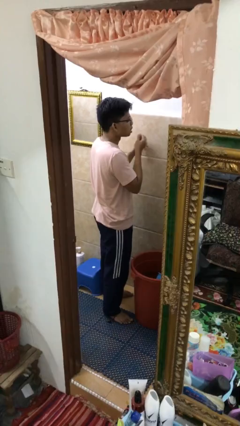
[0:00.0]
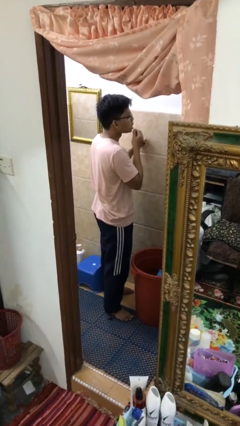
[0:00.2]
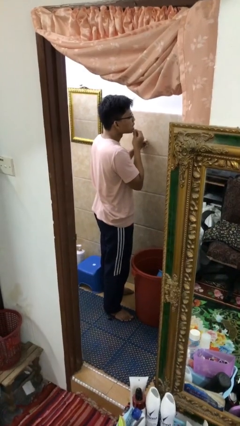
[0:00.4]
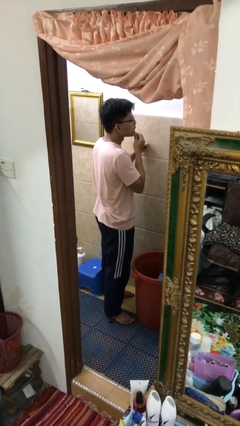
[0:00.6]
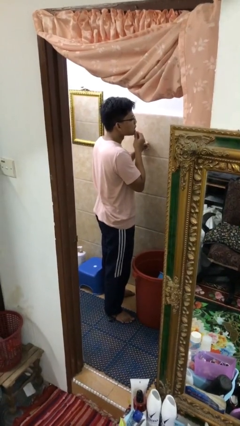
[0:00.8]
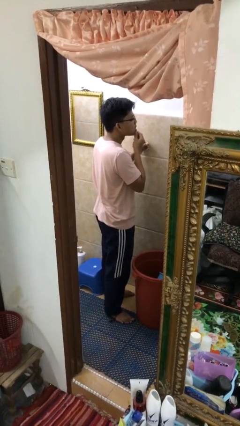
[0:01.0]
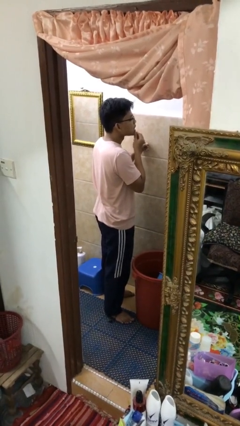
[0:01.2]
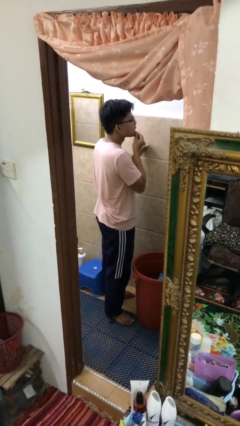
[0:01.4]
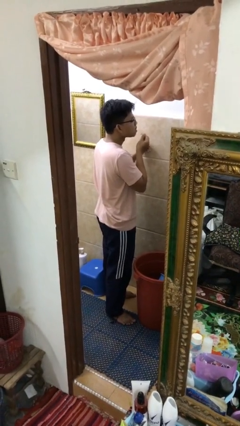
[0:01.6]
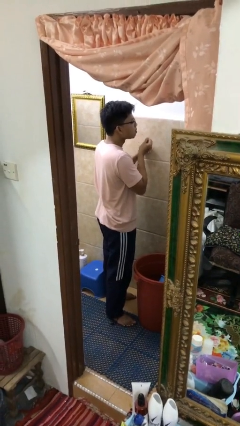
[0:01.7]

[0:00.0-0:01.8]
person flosses

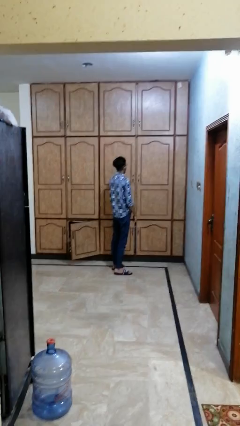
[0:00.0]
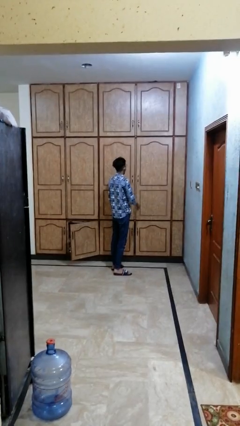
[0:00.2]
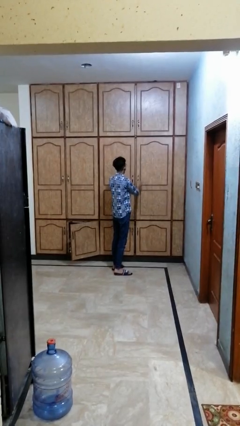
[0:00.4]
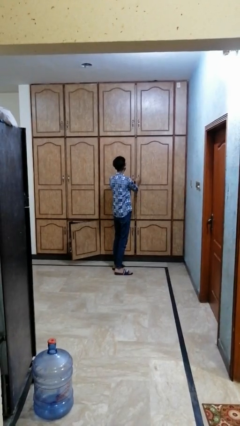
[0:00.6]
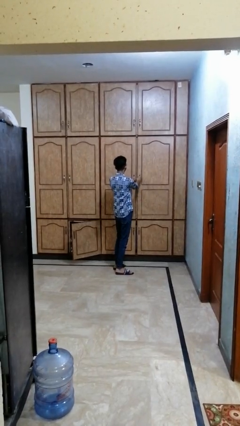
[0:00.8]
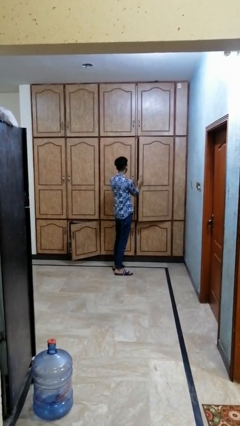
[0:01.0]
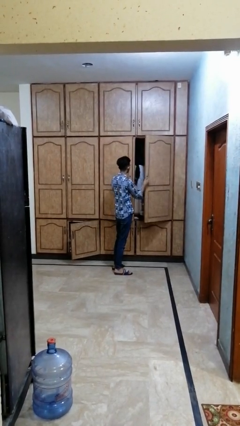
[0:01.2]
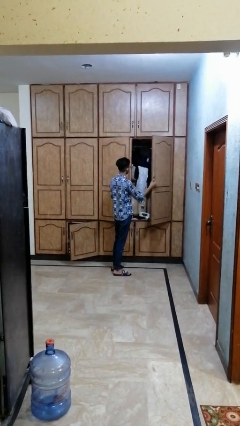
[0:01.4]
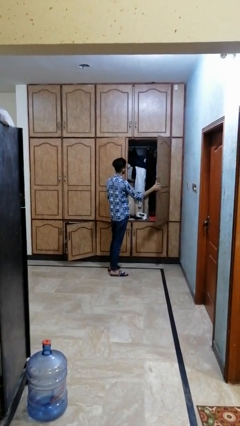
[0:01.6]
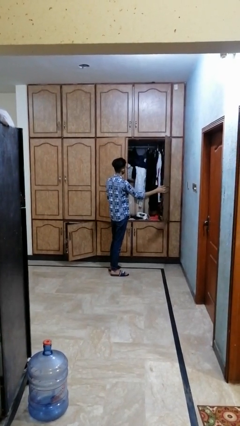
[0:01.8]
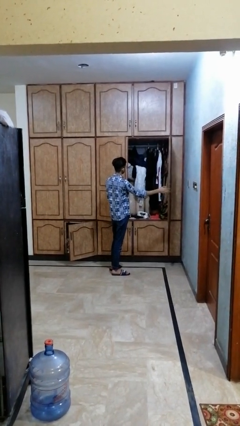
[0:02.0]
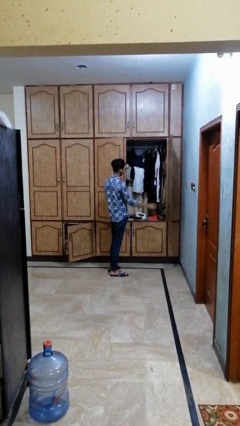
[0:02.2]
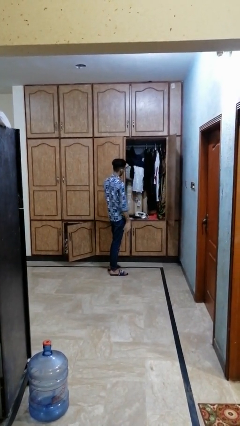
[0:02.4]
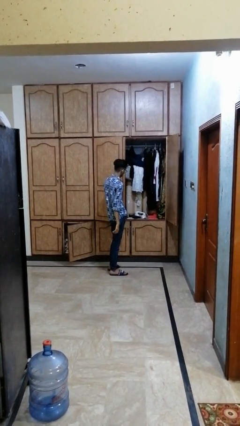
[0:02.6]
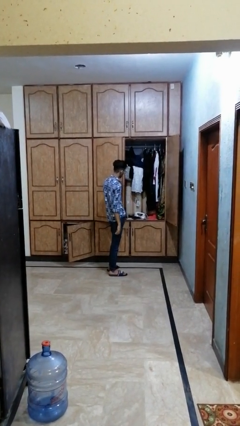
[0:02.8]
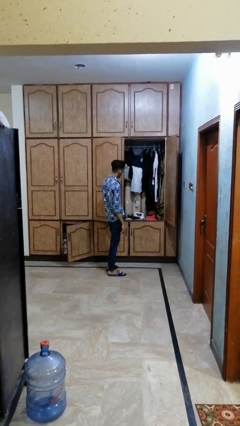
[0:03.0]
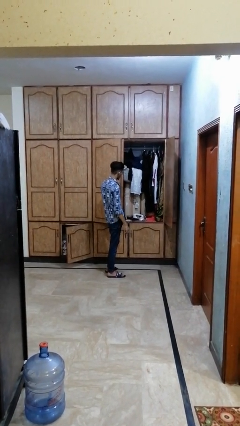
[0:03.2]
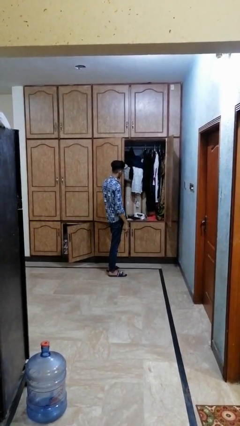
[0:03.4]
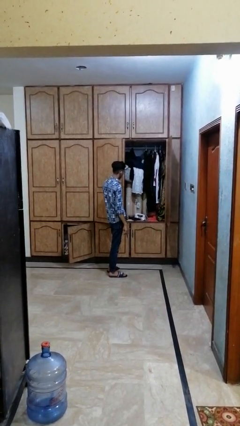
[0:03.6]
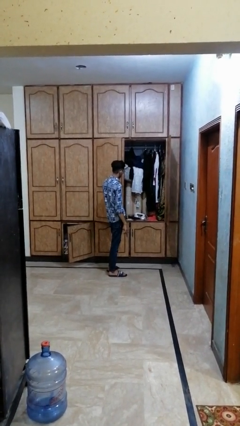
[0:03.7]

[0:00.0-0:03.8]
person opens dresser drawer

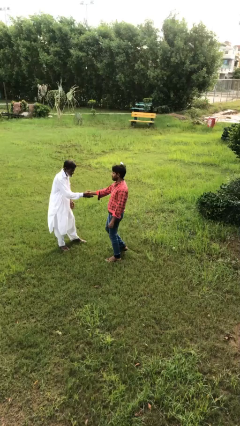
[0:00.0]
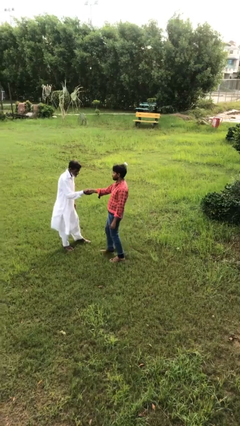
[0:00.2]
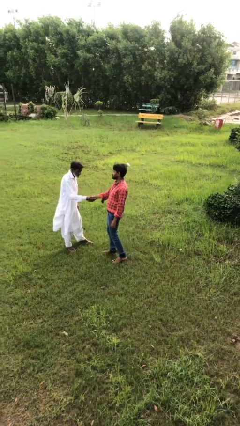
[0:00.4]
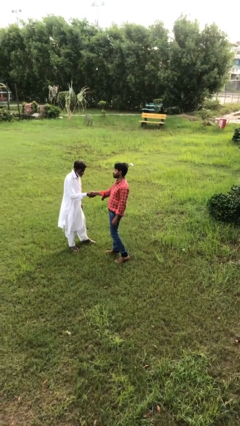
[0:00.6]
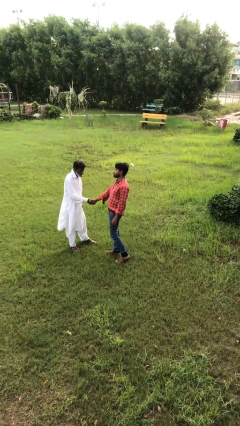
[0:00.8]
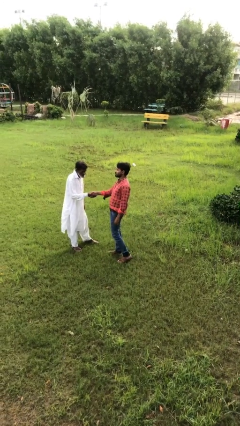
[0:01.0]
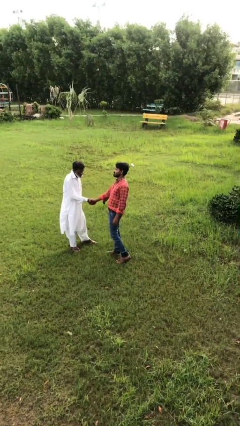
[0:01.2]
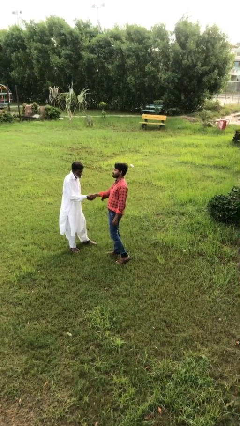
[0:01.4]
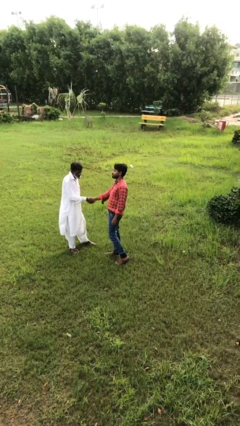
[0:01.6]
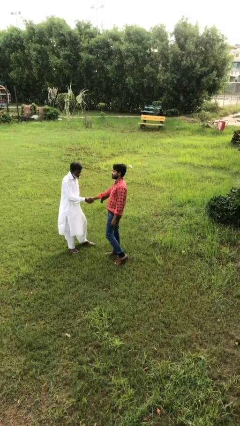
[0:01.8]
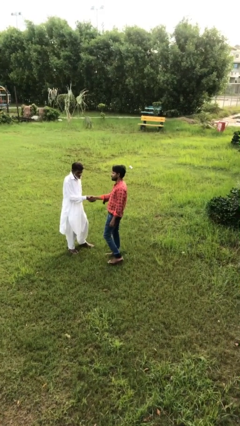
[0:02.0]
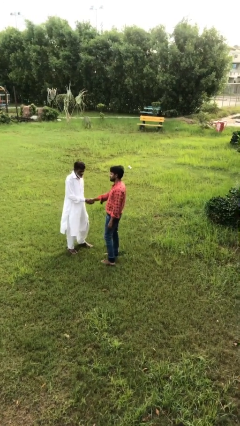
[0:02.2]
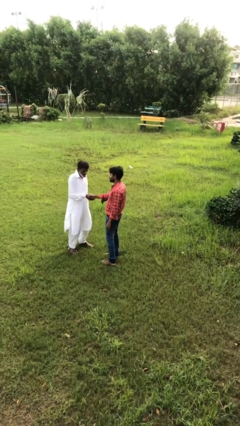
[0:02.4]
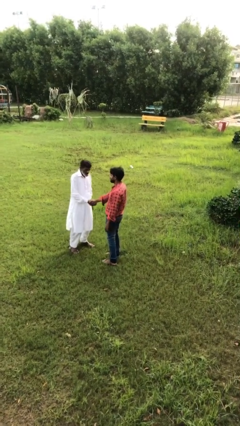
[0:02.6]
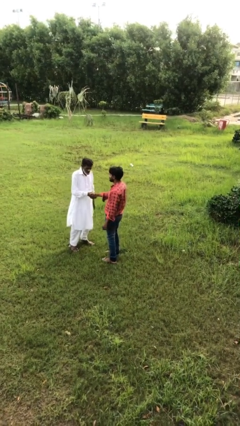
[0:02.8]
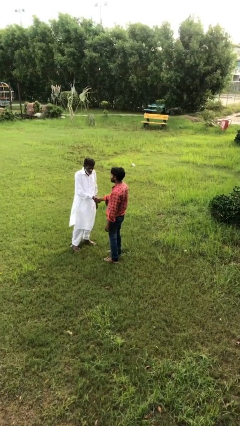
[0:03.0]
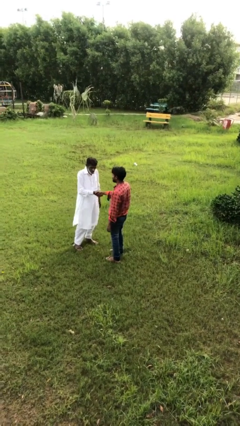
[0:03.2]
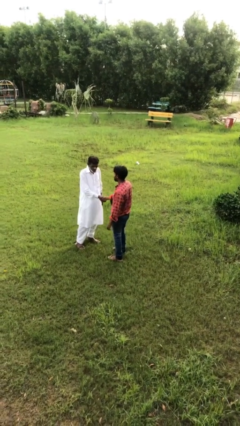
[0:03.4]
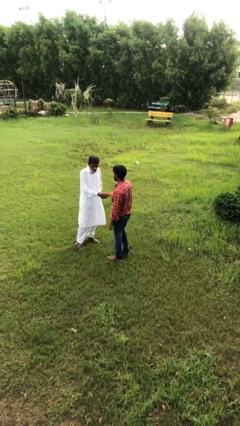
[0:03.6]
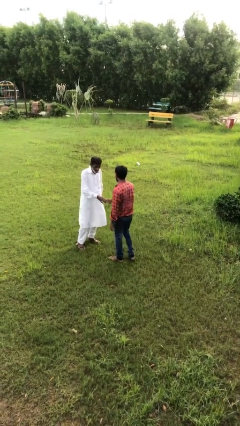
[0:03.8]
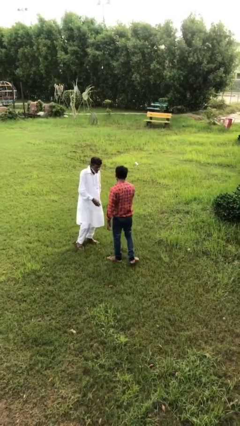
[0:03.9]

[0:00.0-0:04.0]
person shakes hand

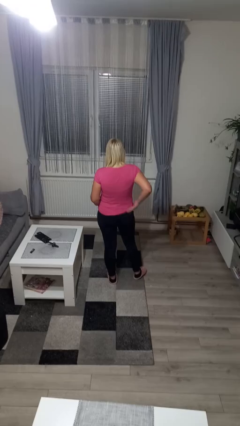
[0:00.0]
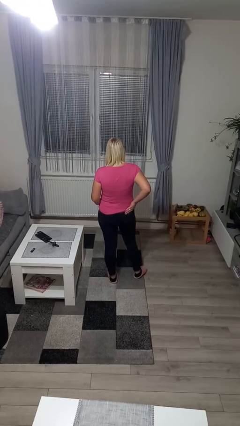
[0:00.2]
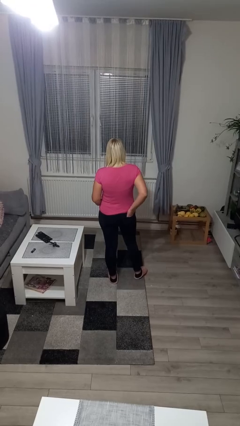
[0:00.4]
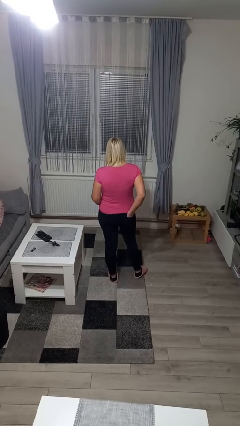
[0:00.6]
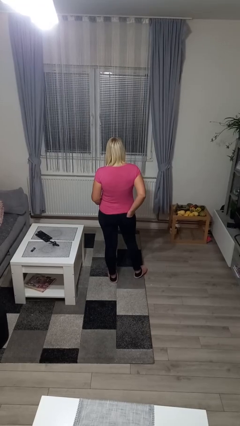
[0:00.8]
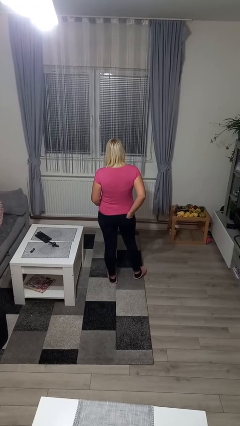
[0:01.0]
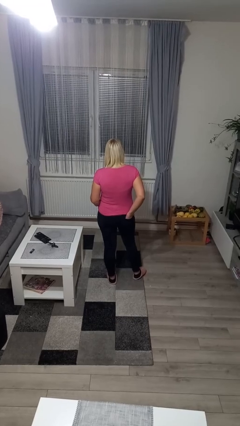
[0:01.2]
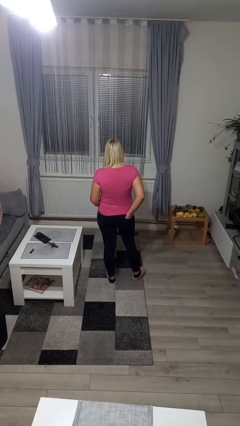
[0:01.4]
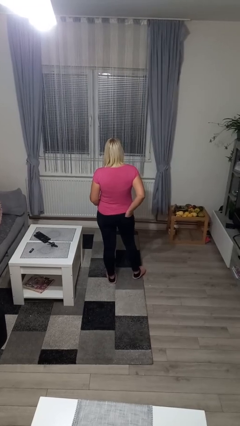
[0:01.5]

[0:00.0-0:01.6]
person puts hands in back pockets

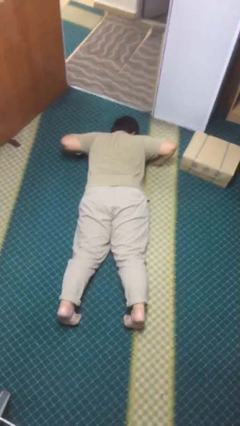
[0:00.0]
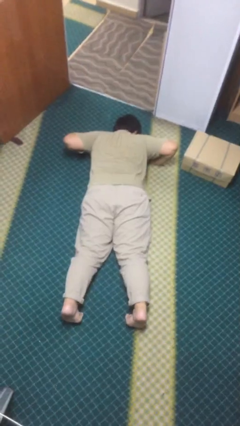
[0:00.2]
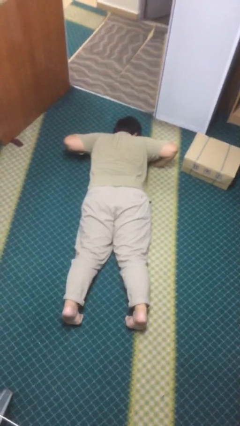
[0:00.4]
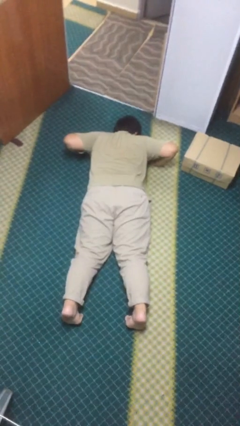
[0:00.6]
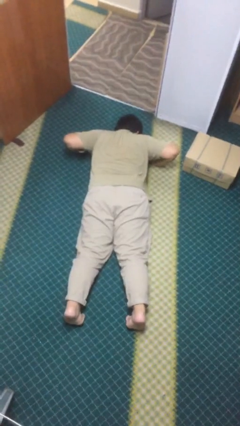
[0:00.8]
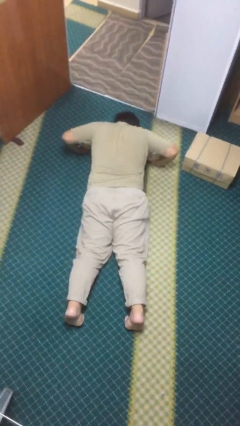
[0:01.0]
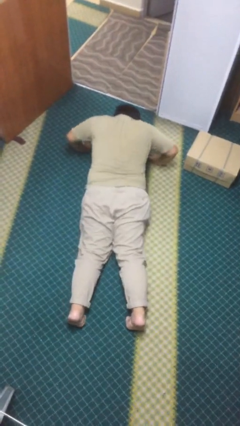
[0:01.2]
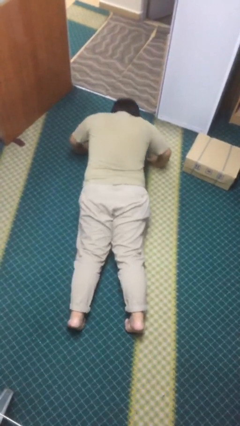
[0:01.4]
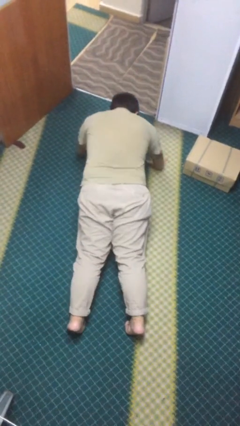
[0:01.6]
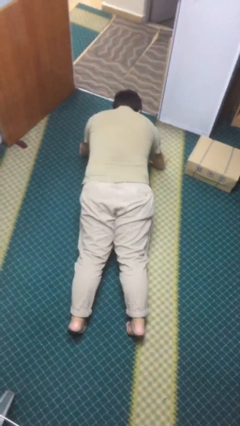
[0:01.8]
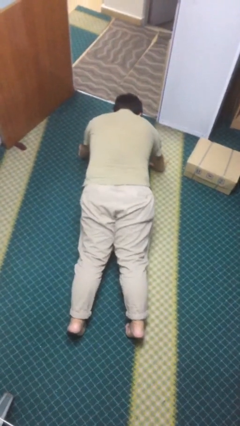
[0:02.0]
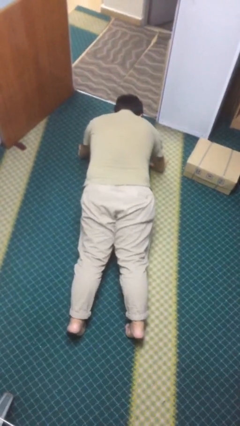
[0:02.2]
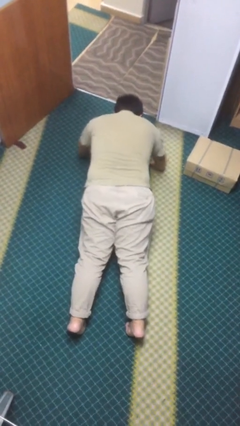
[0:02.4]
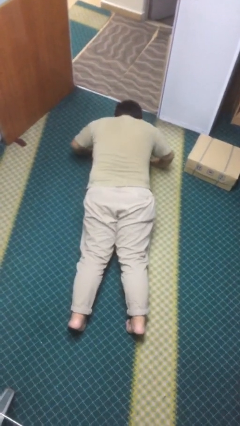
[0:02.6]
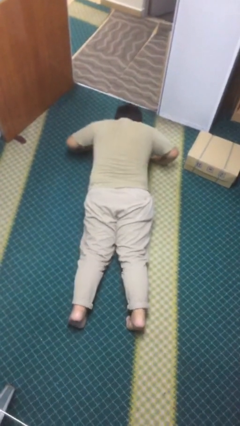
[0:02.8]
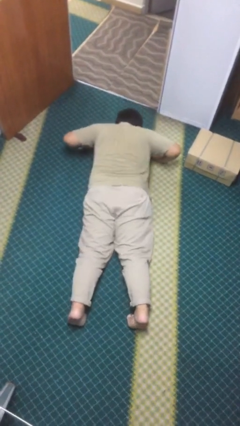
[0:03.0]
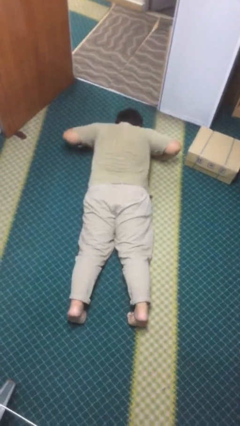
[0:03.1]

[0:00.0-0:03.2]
person exercises with pushup

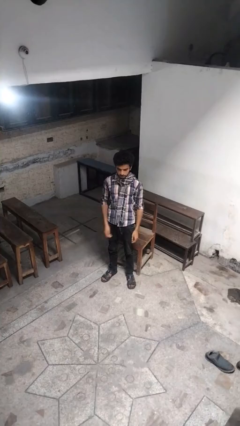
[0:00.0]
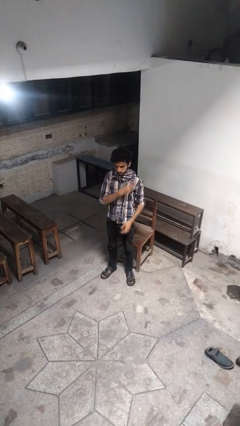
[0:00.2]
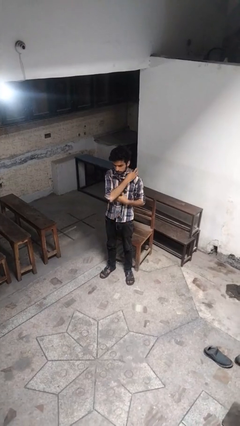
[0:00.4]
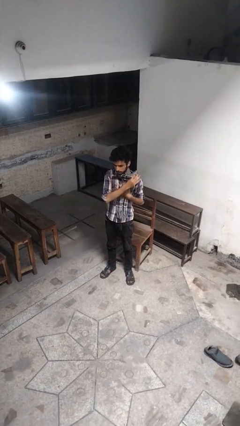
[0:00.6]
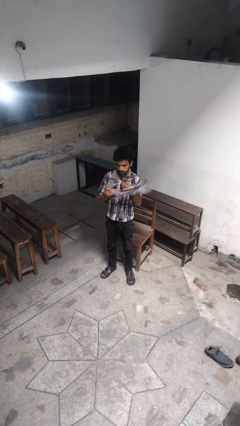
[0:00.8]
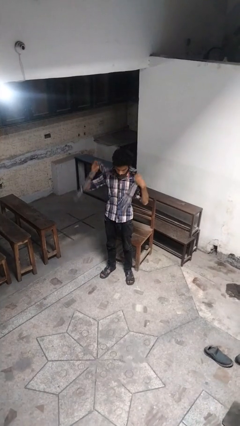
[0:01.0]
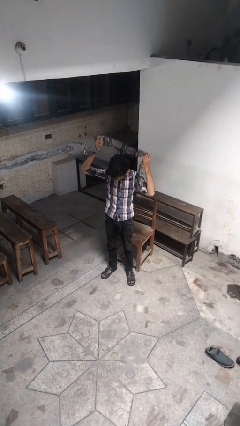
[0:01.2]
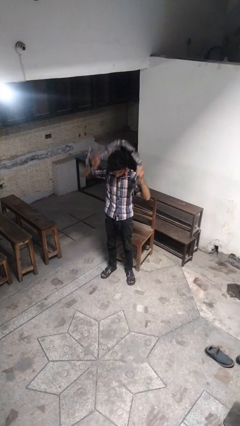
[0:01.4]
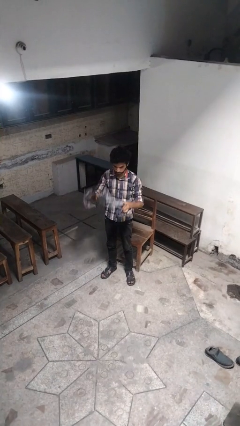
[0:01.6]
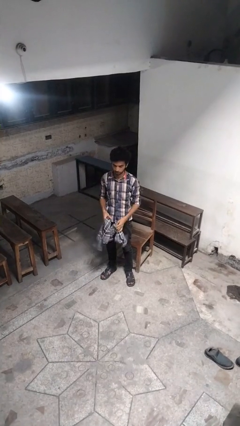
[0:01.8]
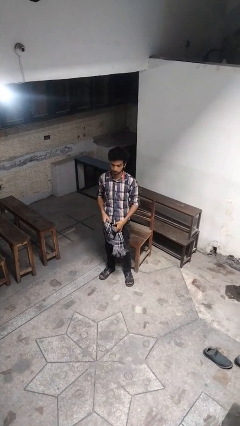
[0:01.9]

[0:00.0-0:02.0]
person takes off scarf

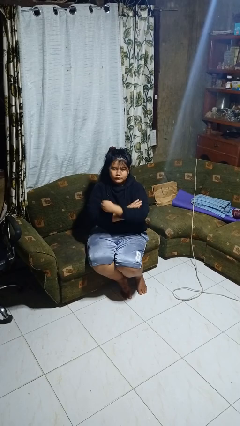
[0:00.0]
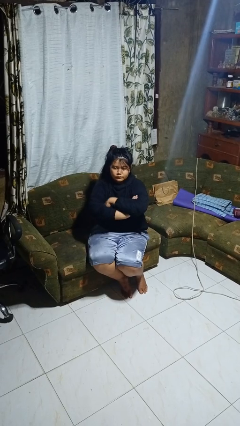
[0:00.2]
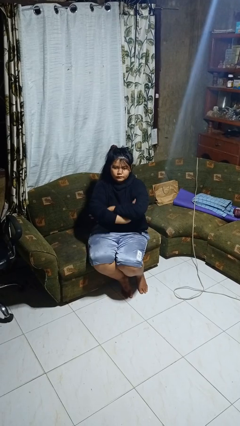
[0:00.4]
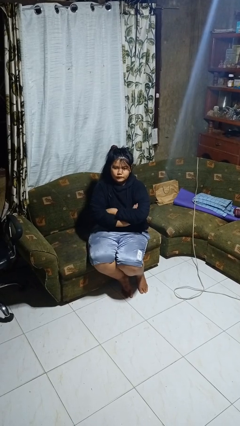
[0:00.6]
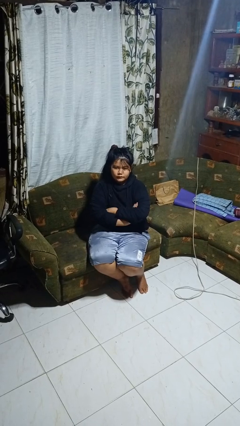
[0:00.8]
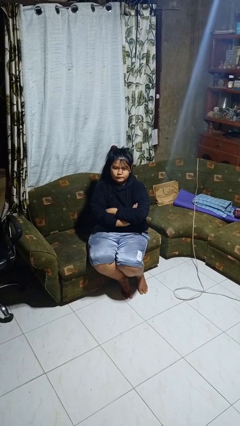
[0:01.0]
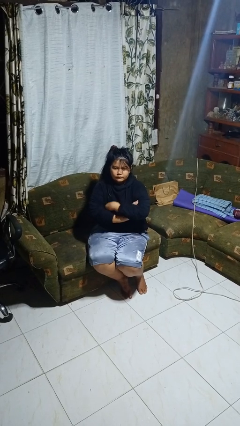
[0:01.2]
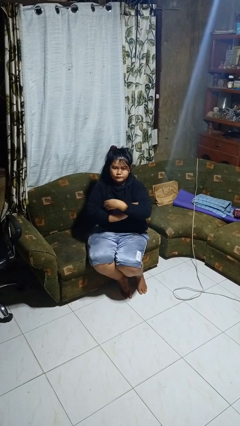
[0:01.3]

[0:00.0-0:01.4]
person crosses arms
